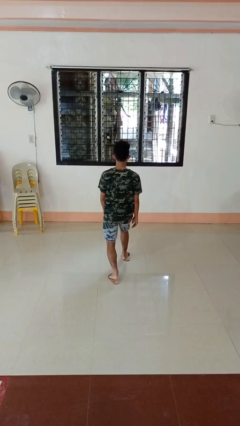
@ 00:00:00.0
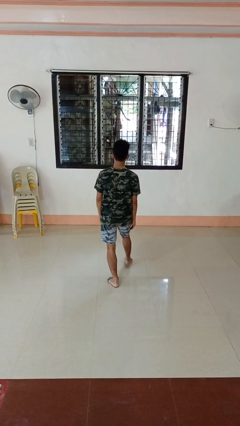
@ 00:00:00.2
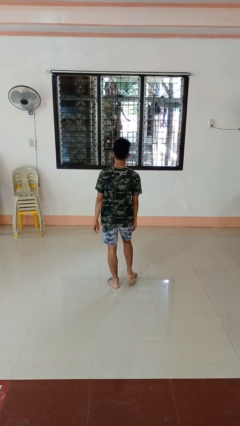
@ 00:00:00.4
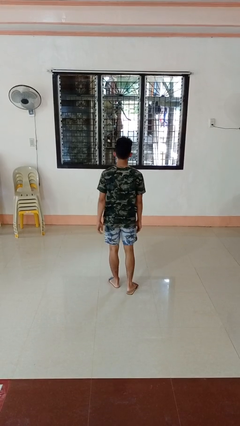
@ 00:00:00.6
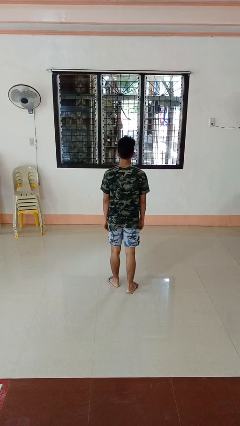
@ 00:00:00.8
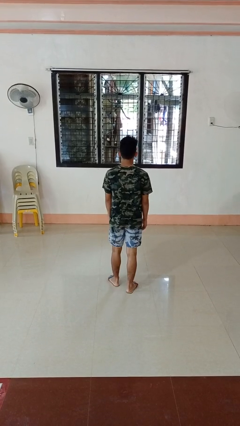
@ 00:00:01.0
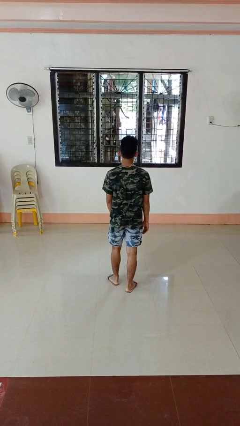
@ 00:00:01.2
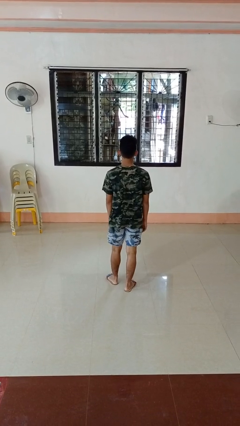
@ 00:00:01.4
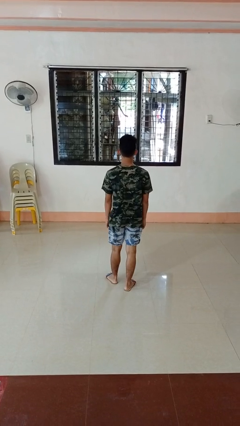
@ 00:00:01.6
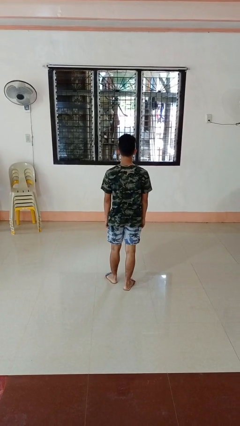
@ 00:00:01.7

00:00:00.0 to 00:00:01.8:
person stands up from floor

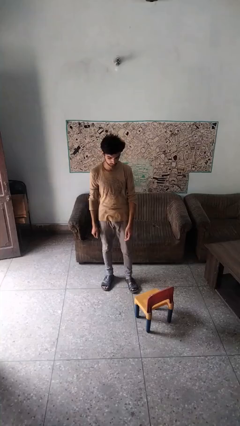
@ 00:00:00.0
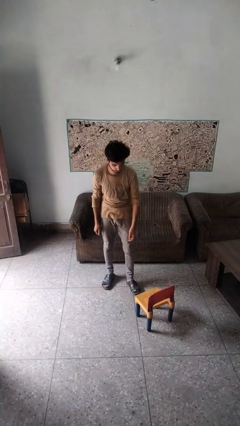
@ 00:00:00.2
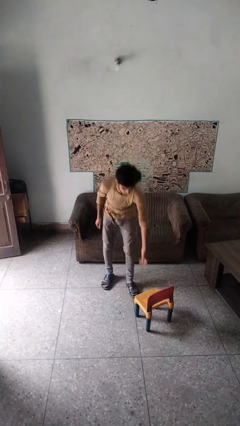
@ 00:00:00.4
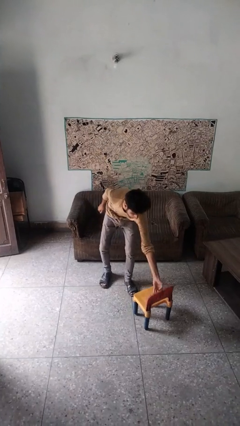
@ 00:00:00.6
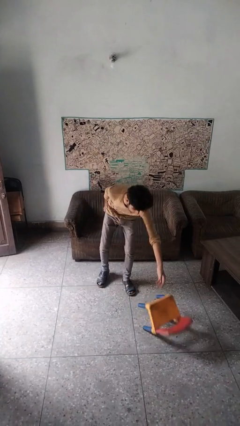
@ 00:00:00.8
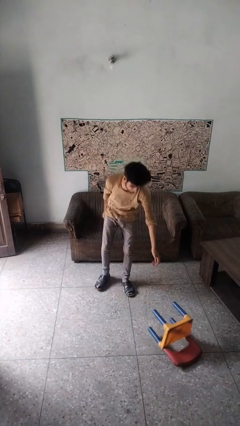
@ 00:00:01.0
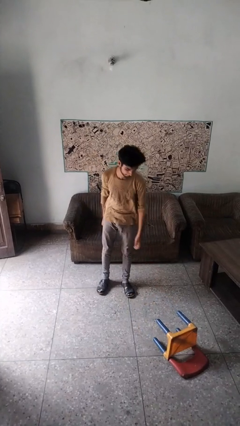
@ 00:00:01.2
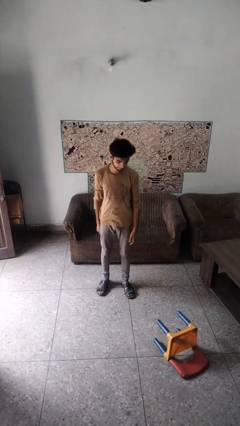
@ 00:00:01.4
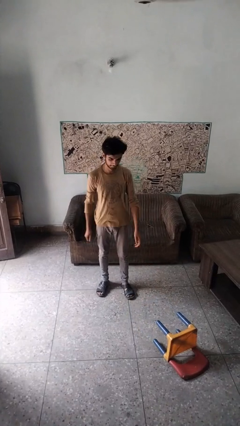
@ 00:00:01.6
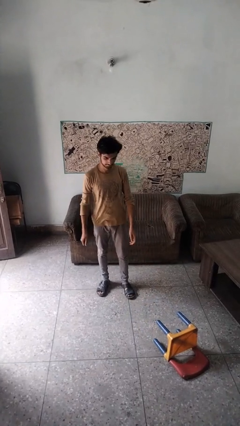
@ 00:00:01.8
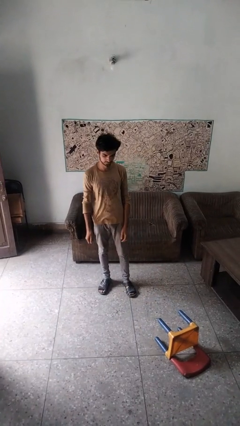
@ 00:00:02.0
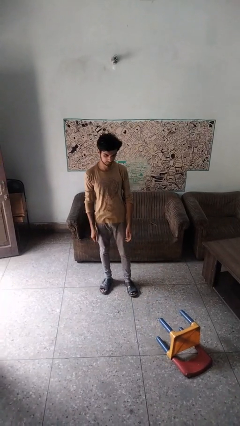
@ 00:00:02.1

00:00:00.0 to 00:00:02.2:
person knocks over furniture

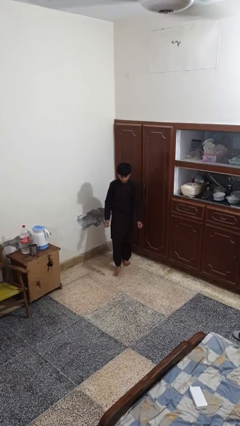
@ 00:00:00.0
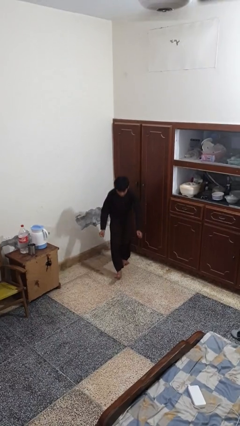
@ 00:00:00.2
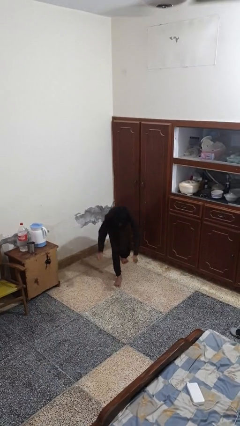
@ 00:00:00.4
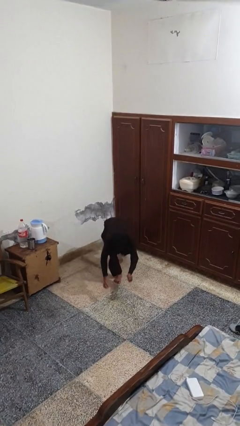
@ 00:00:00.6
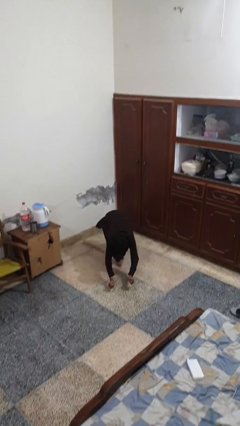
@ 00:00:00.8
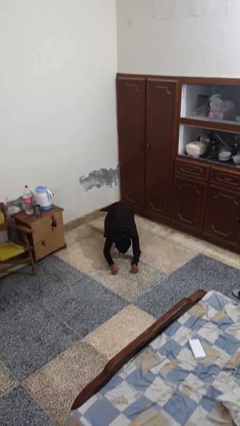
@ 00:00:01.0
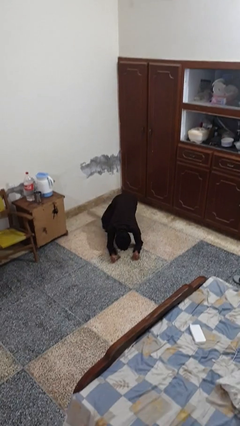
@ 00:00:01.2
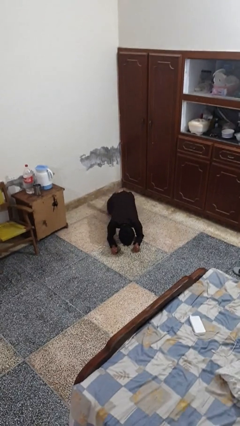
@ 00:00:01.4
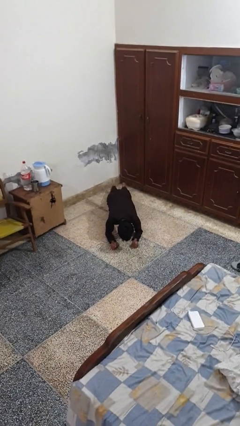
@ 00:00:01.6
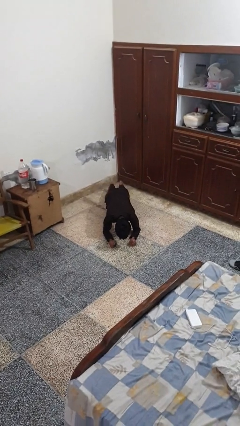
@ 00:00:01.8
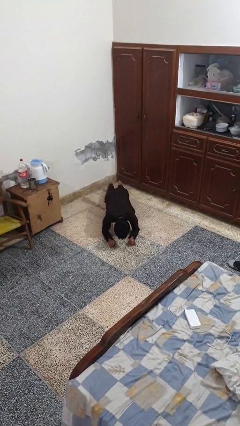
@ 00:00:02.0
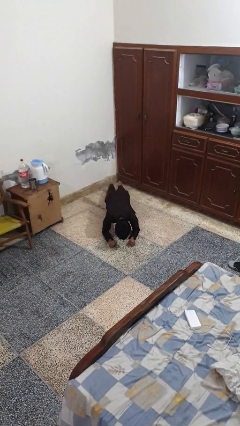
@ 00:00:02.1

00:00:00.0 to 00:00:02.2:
person exercises with plank

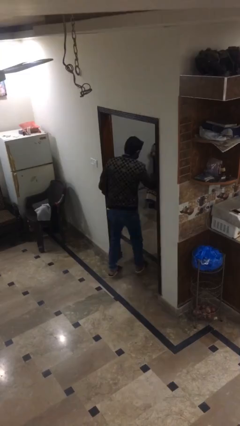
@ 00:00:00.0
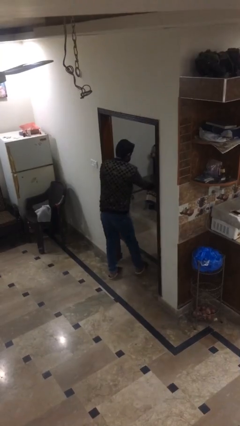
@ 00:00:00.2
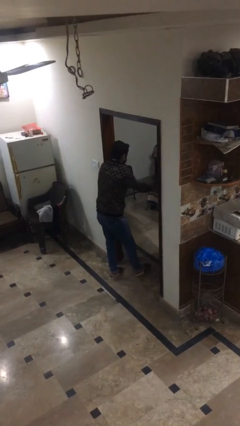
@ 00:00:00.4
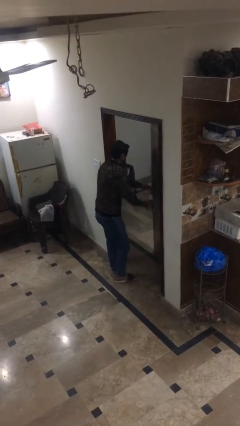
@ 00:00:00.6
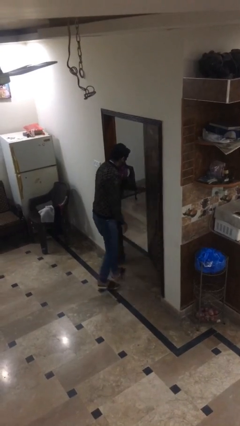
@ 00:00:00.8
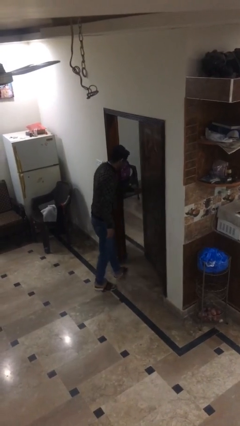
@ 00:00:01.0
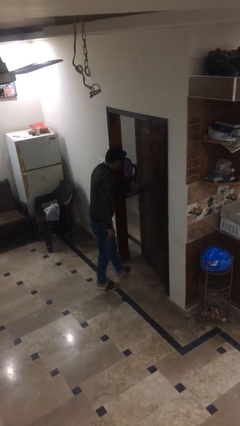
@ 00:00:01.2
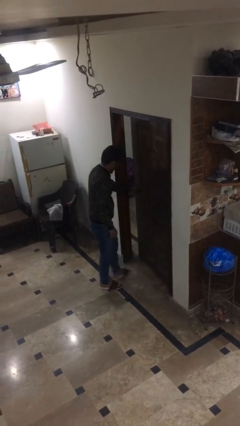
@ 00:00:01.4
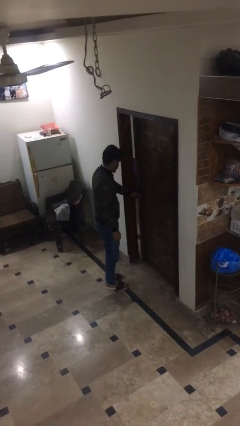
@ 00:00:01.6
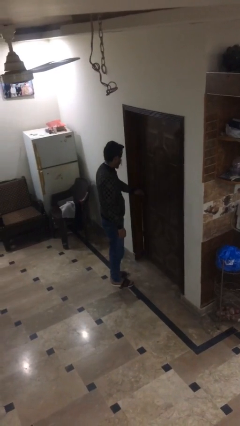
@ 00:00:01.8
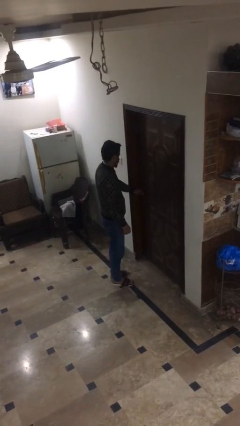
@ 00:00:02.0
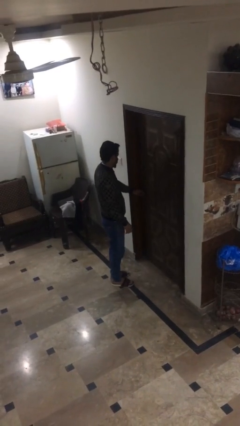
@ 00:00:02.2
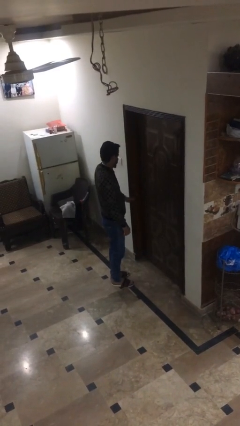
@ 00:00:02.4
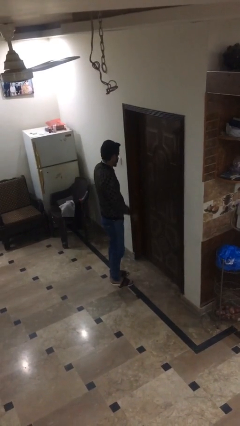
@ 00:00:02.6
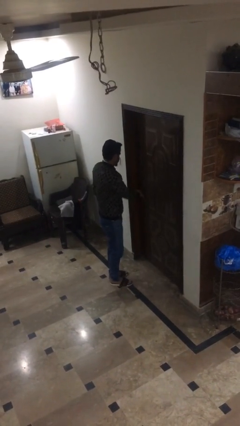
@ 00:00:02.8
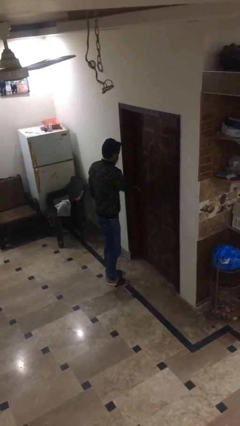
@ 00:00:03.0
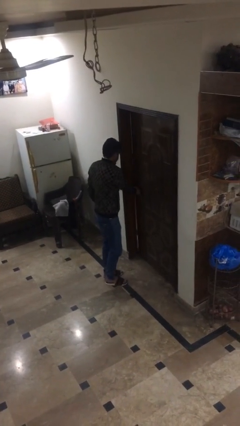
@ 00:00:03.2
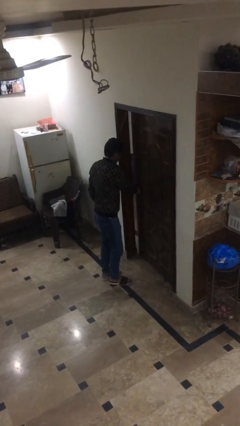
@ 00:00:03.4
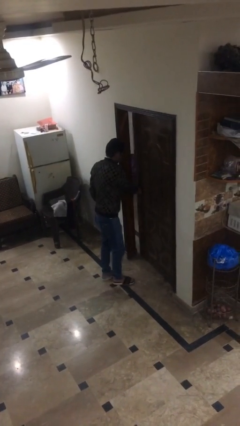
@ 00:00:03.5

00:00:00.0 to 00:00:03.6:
person closes facility door

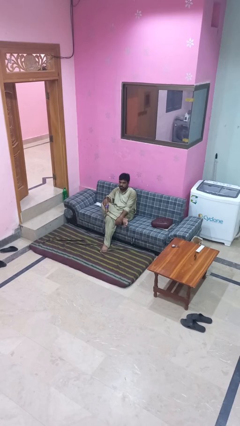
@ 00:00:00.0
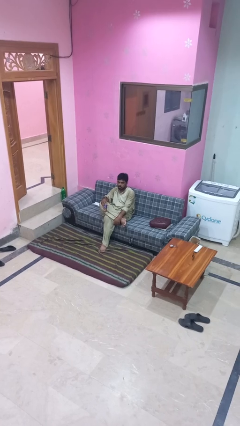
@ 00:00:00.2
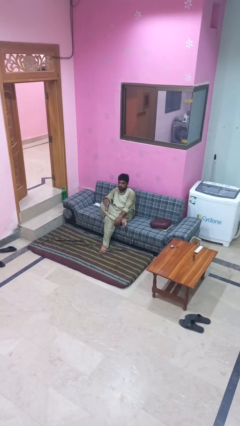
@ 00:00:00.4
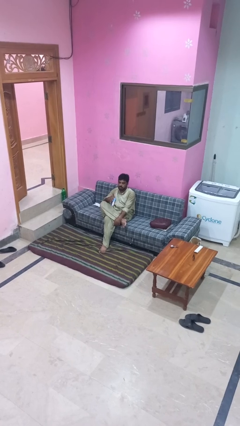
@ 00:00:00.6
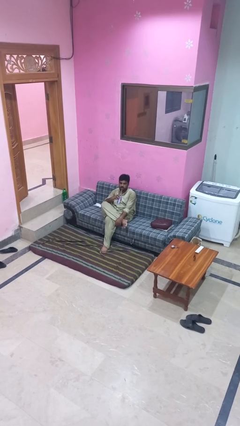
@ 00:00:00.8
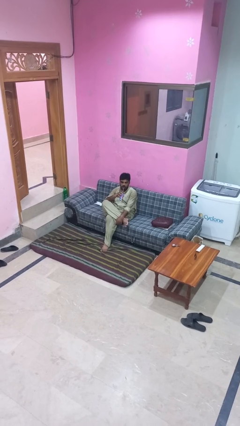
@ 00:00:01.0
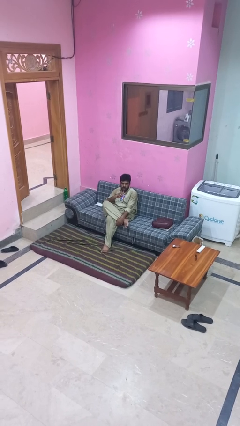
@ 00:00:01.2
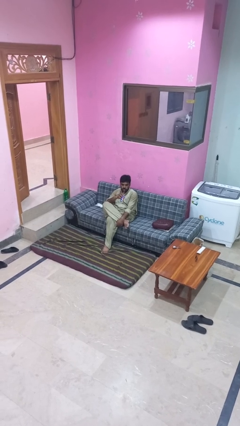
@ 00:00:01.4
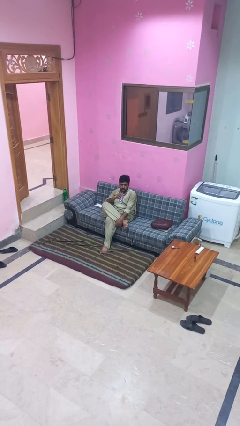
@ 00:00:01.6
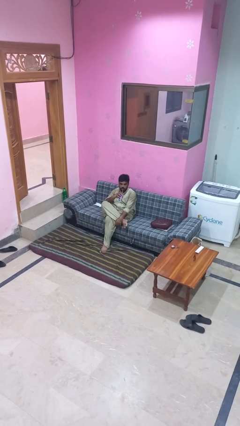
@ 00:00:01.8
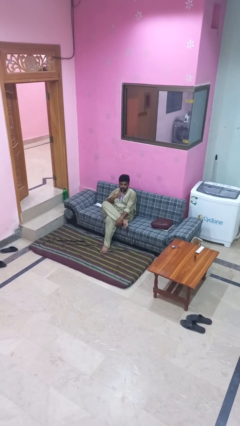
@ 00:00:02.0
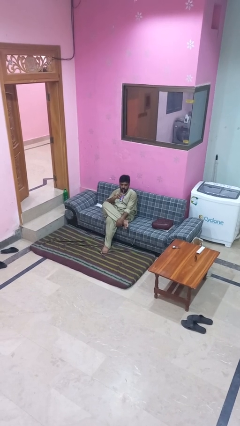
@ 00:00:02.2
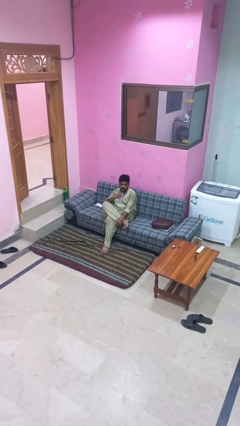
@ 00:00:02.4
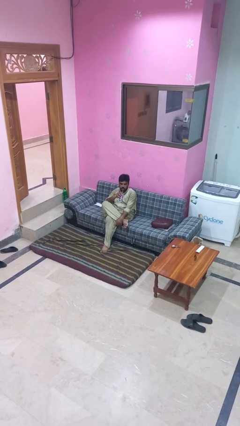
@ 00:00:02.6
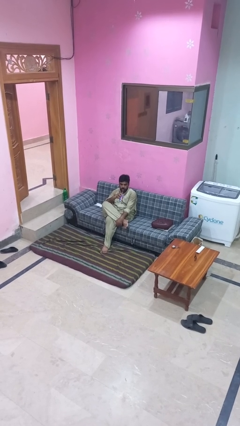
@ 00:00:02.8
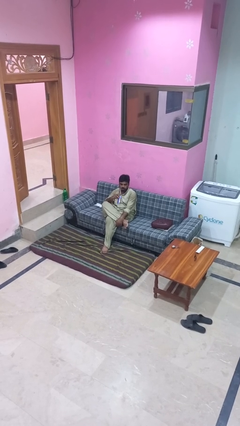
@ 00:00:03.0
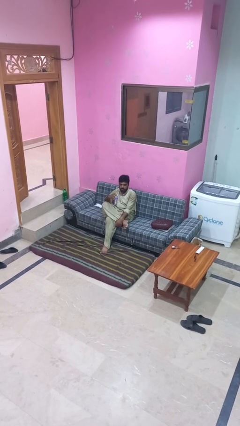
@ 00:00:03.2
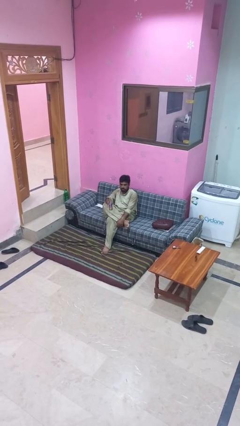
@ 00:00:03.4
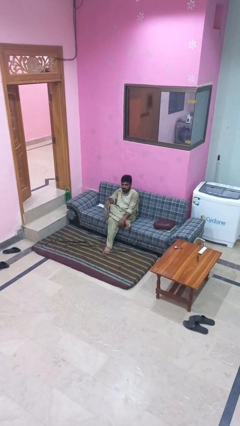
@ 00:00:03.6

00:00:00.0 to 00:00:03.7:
person drinks from straw

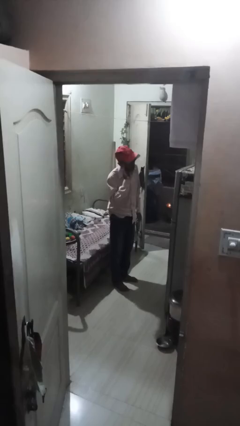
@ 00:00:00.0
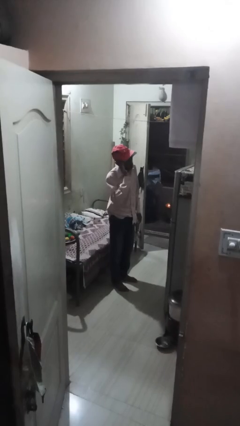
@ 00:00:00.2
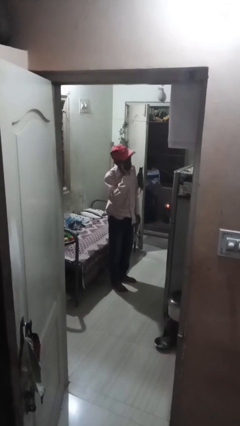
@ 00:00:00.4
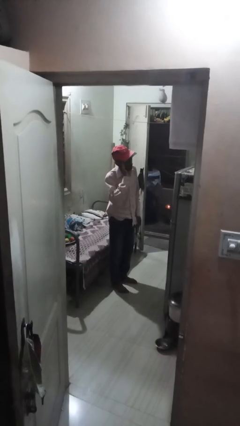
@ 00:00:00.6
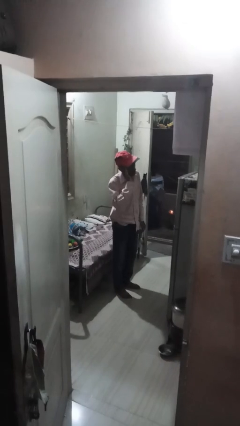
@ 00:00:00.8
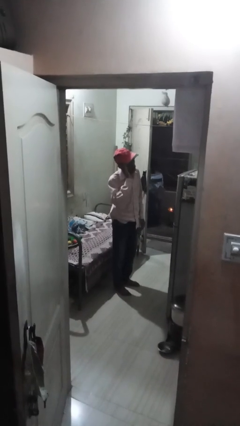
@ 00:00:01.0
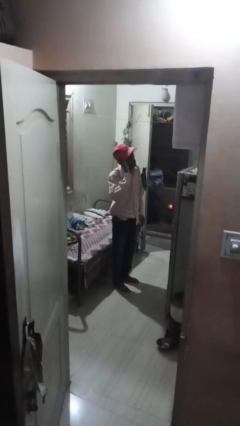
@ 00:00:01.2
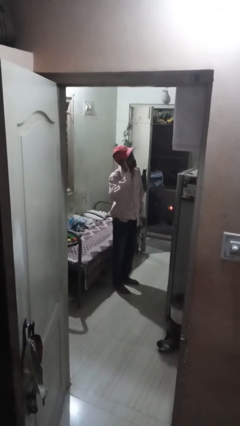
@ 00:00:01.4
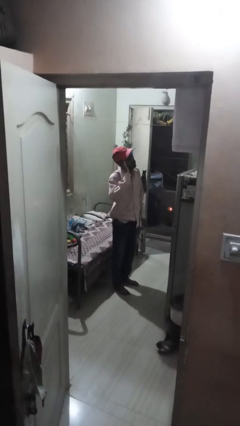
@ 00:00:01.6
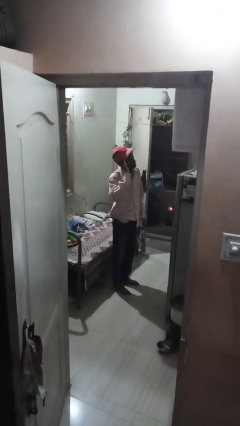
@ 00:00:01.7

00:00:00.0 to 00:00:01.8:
person salutes

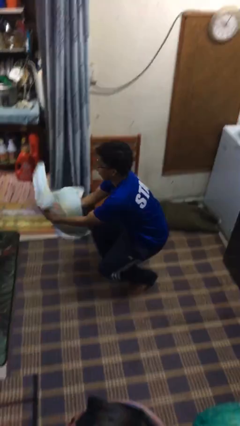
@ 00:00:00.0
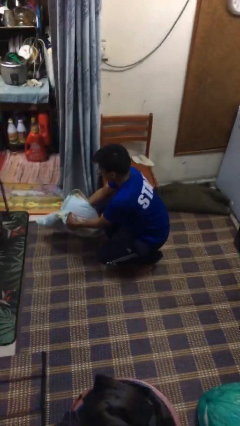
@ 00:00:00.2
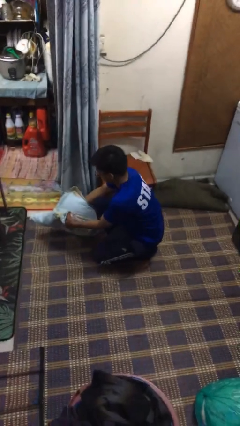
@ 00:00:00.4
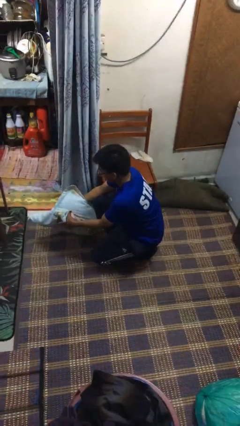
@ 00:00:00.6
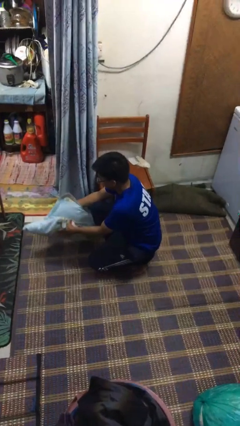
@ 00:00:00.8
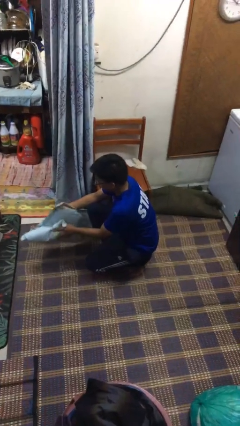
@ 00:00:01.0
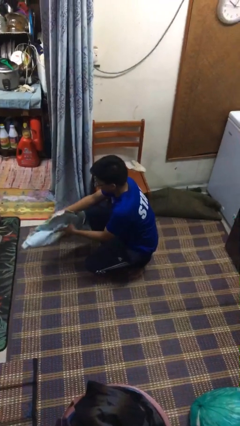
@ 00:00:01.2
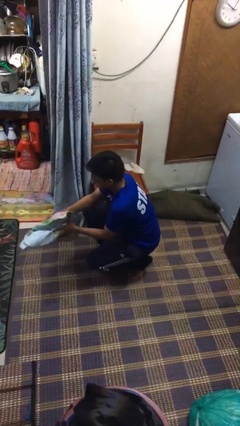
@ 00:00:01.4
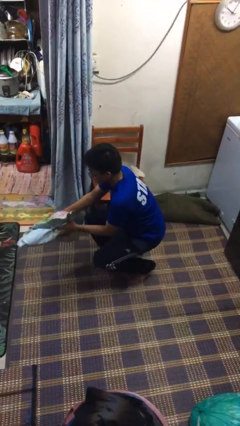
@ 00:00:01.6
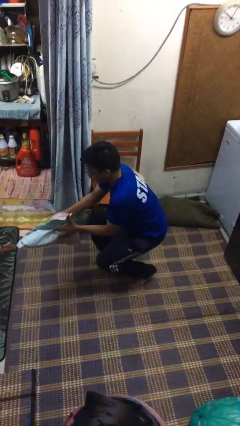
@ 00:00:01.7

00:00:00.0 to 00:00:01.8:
person catches dropped object
